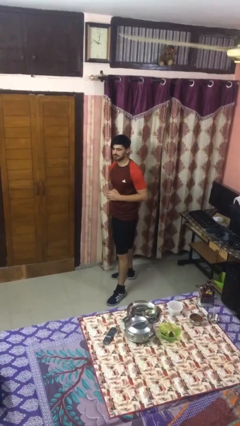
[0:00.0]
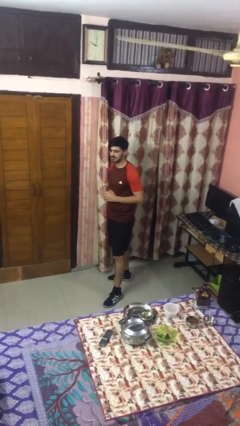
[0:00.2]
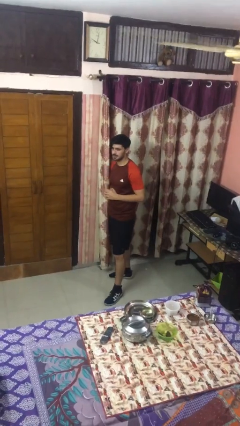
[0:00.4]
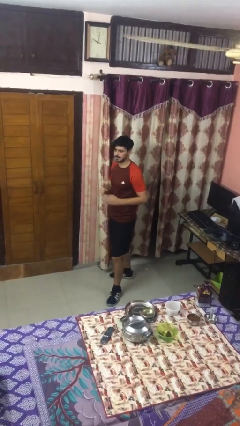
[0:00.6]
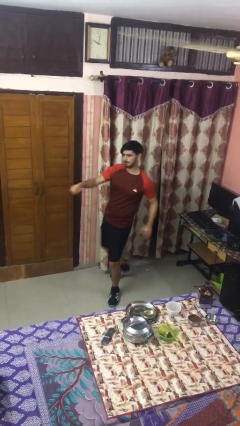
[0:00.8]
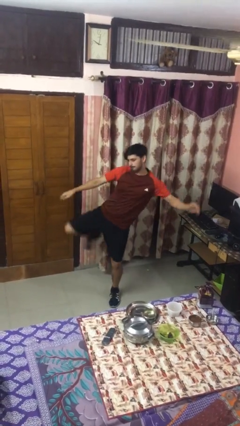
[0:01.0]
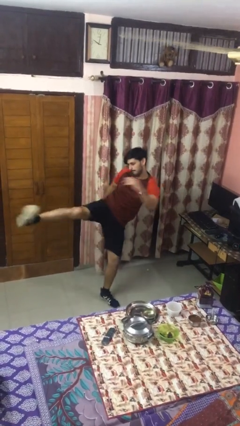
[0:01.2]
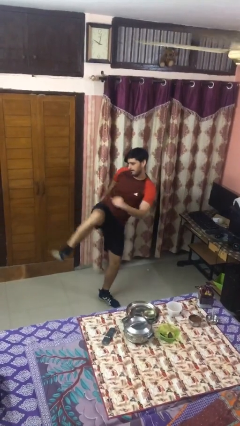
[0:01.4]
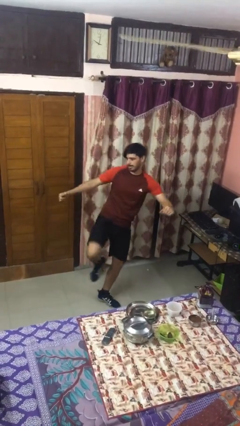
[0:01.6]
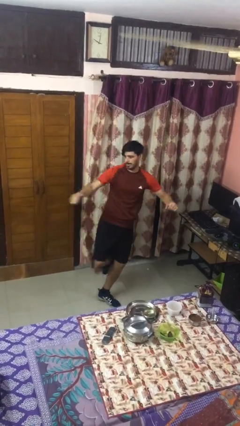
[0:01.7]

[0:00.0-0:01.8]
person karate kicks

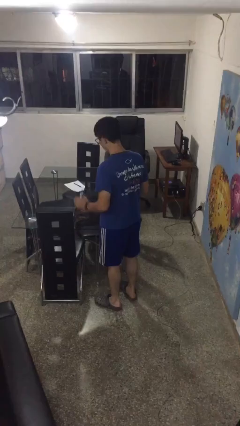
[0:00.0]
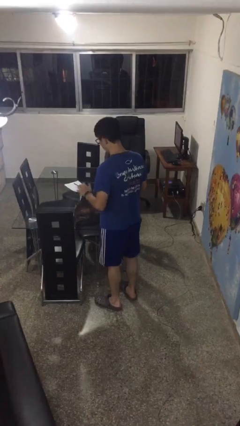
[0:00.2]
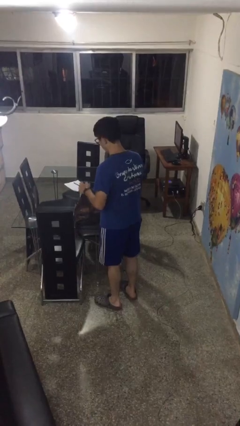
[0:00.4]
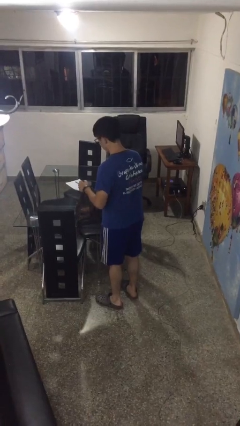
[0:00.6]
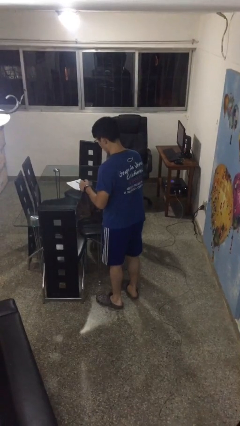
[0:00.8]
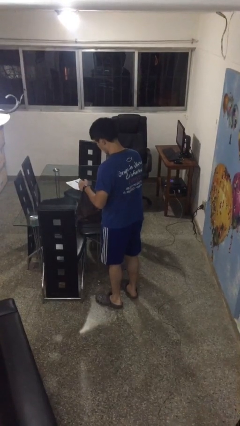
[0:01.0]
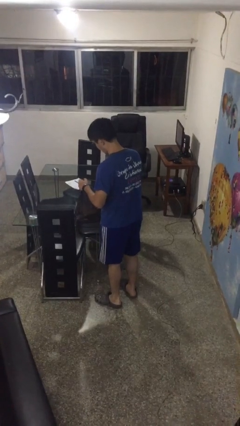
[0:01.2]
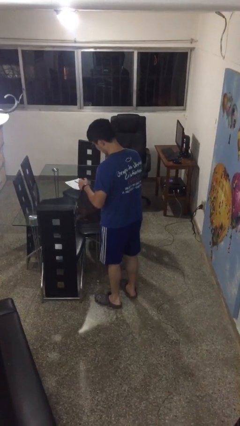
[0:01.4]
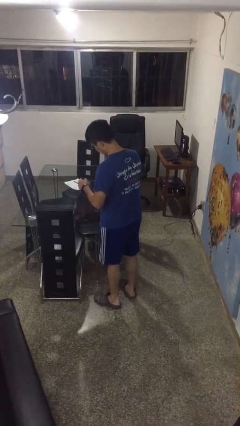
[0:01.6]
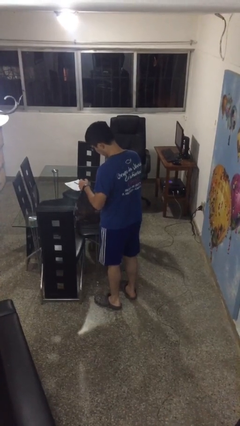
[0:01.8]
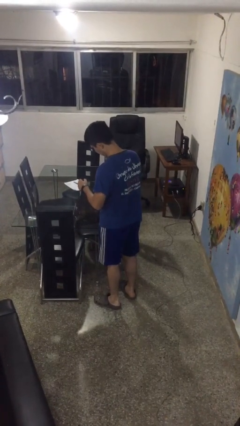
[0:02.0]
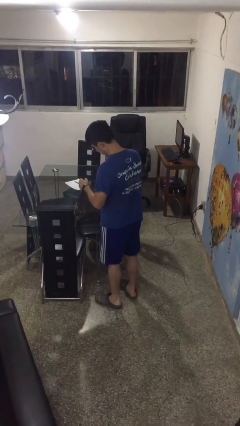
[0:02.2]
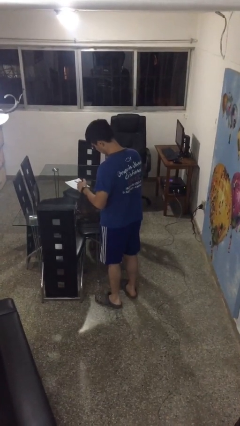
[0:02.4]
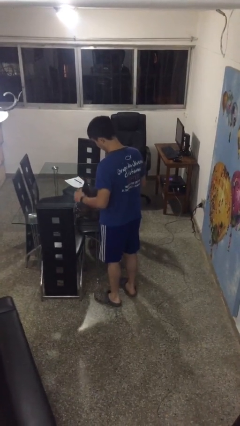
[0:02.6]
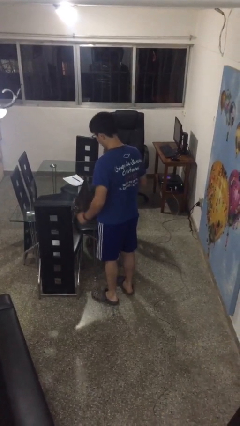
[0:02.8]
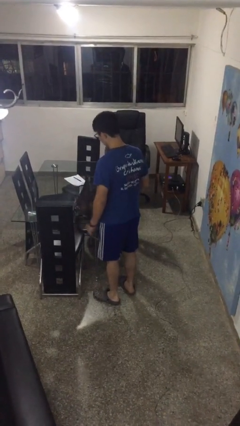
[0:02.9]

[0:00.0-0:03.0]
person searches in bag

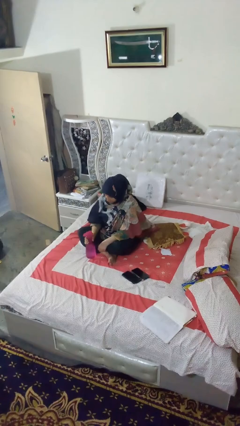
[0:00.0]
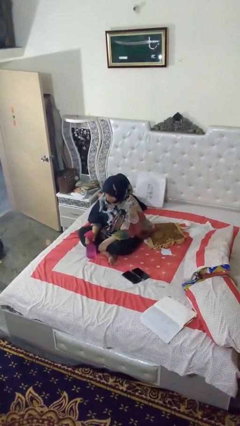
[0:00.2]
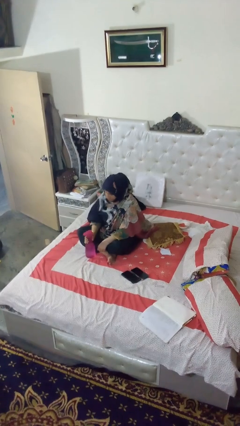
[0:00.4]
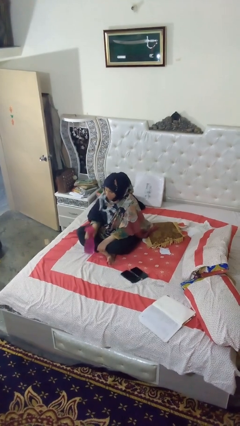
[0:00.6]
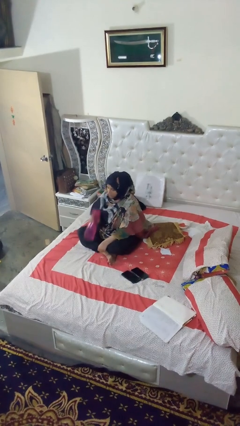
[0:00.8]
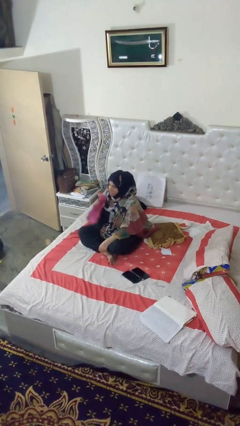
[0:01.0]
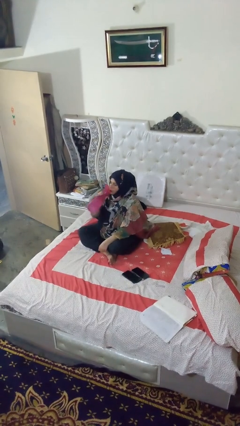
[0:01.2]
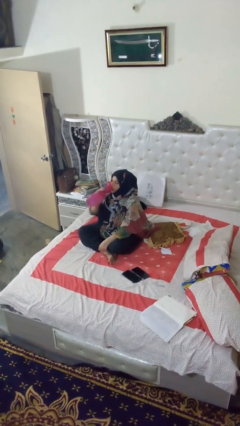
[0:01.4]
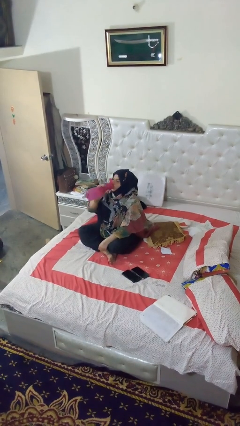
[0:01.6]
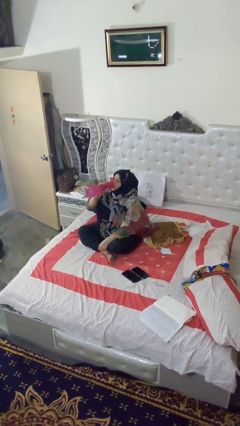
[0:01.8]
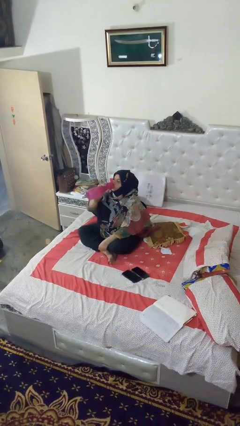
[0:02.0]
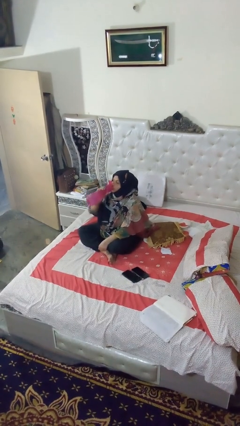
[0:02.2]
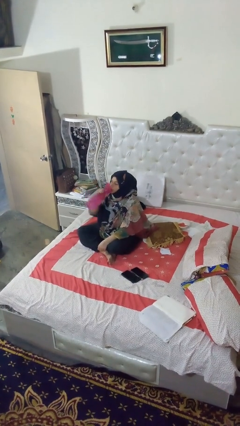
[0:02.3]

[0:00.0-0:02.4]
person drinks from bottle

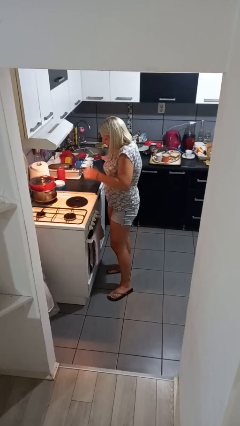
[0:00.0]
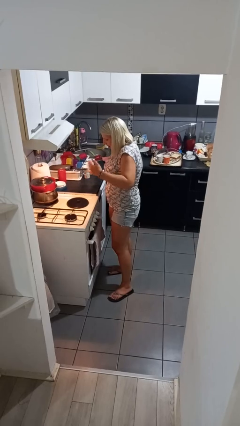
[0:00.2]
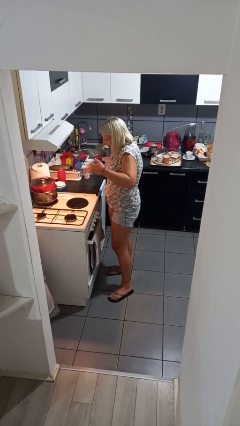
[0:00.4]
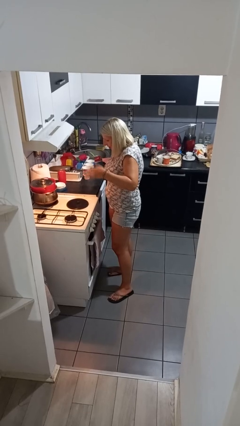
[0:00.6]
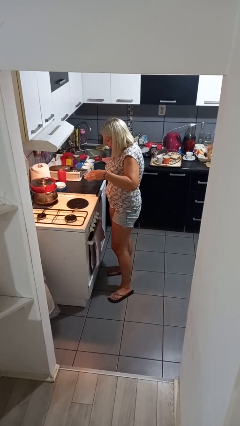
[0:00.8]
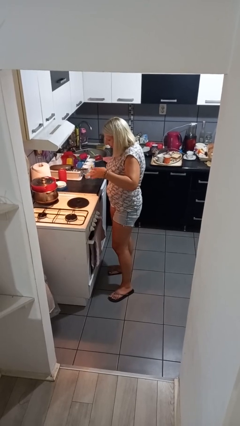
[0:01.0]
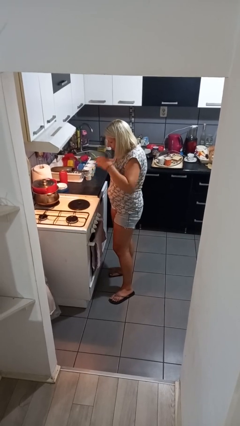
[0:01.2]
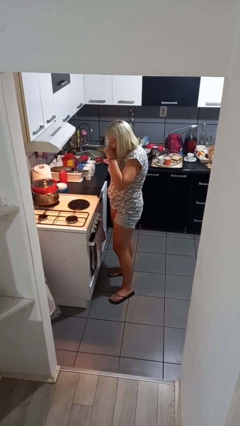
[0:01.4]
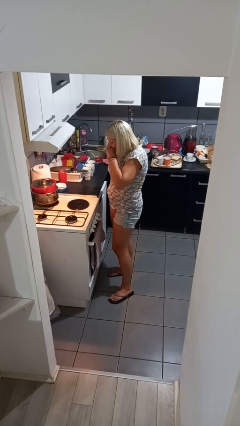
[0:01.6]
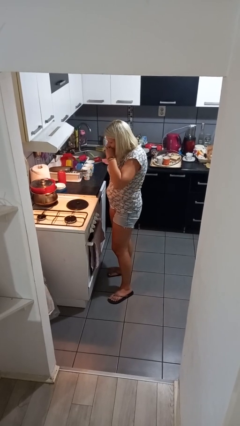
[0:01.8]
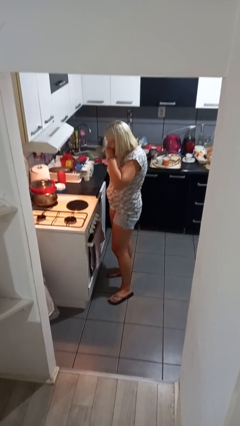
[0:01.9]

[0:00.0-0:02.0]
person burns hand

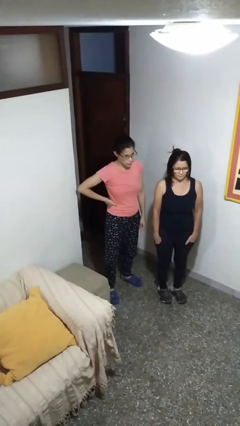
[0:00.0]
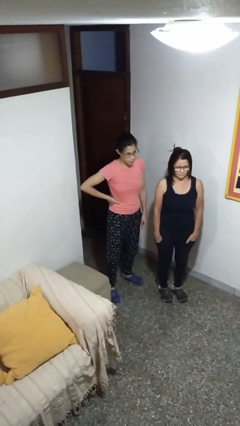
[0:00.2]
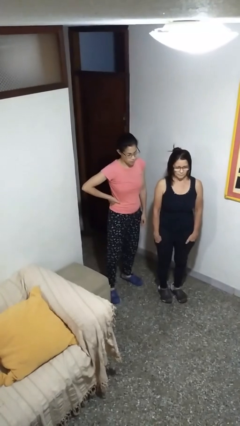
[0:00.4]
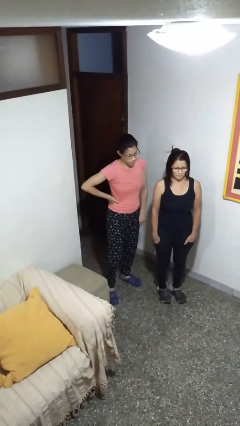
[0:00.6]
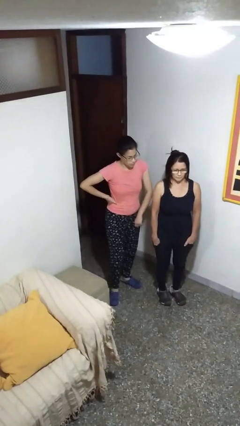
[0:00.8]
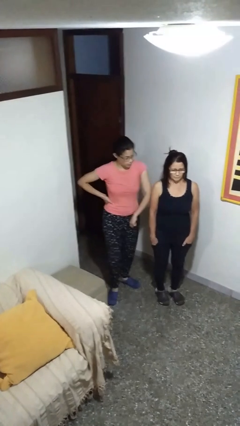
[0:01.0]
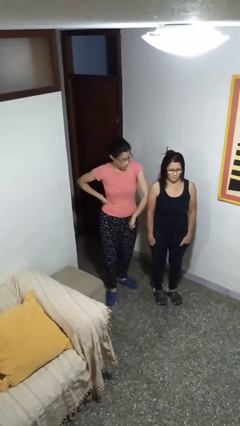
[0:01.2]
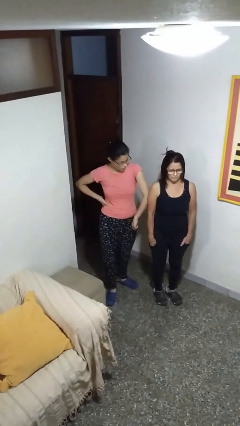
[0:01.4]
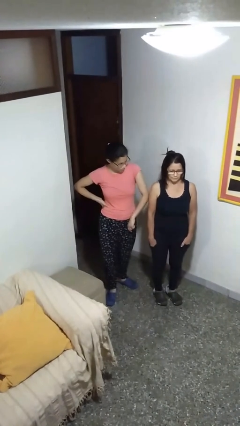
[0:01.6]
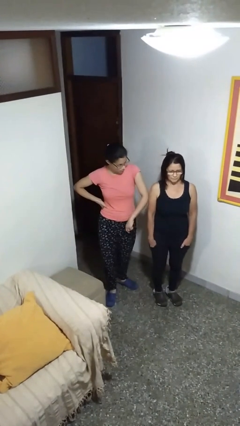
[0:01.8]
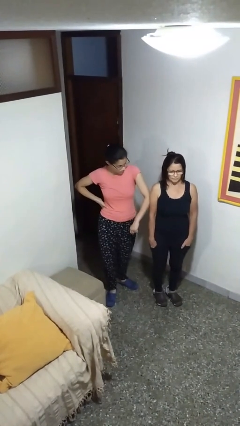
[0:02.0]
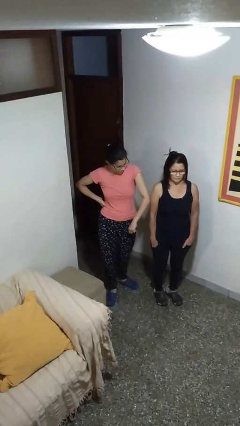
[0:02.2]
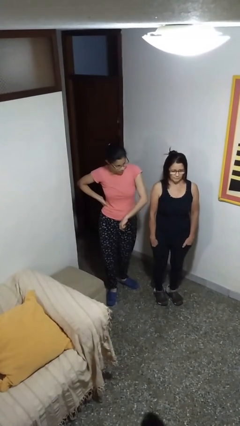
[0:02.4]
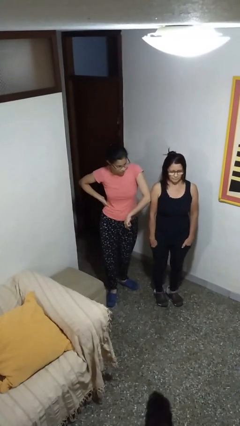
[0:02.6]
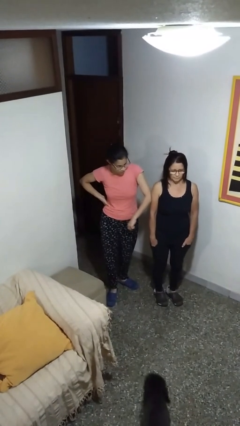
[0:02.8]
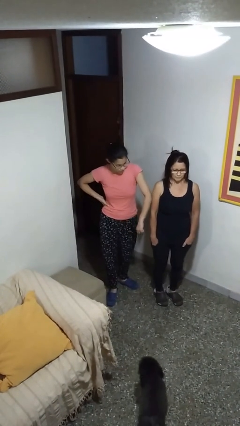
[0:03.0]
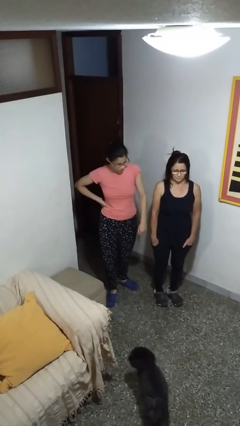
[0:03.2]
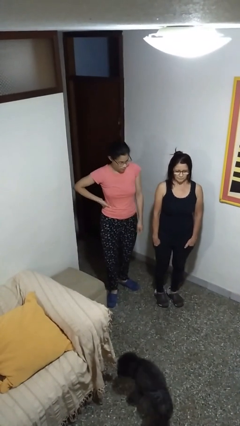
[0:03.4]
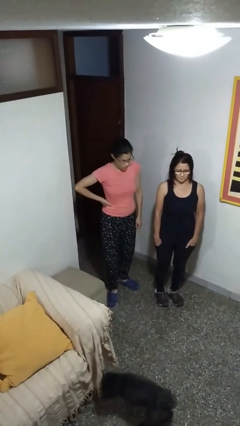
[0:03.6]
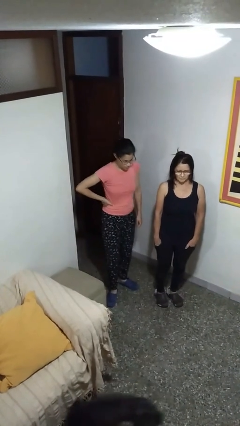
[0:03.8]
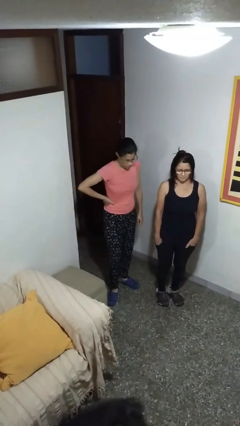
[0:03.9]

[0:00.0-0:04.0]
person nudges person with elbow

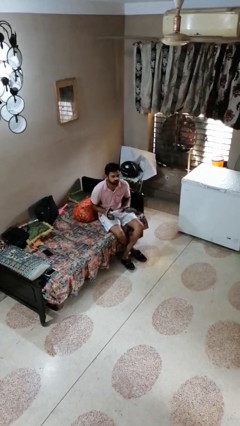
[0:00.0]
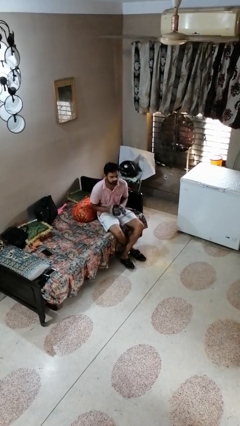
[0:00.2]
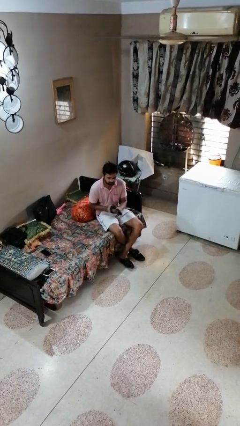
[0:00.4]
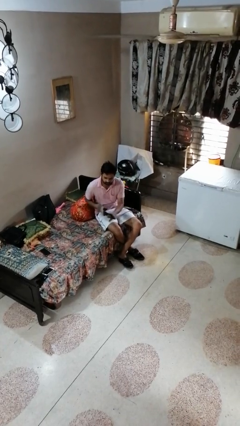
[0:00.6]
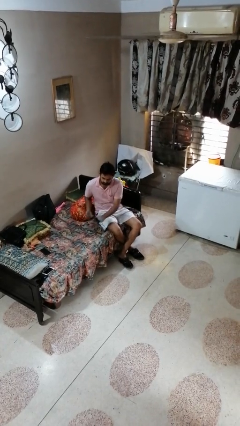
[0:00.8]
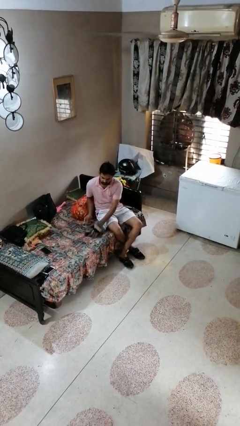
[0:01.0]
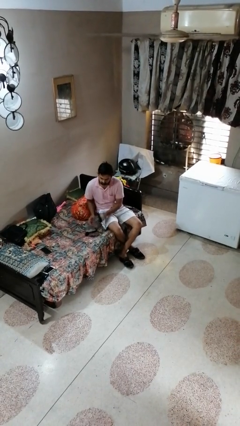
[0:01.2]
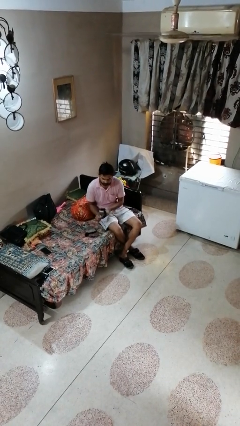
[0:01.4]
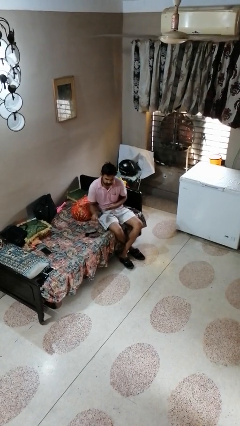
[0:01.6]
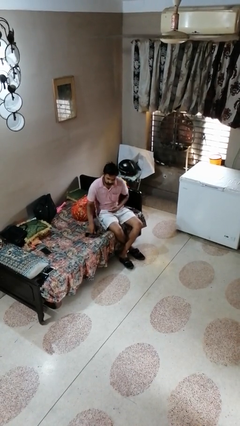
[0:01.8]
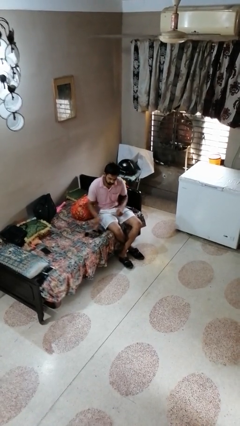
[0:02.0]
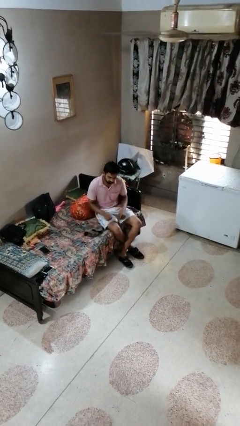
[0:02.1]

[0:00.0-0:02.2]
person takes off gloves

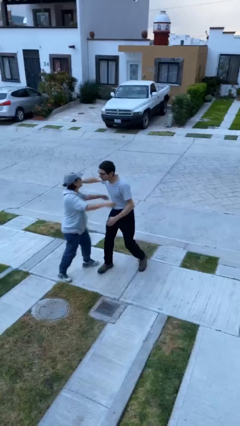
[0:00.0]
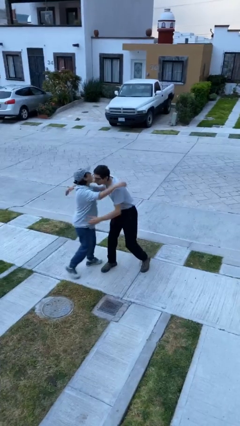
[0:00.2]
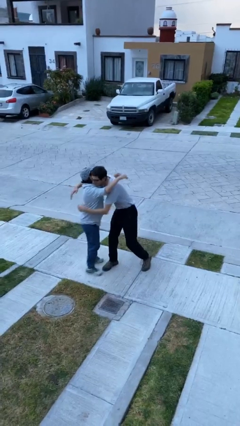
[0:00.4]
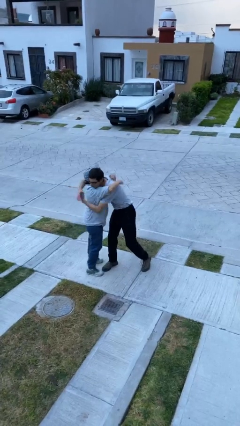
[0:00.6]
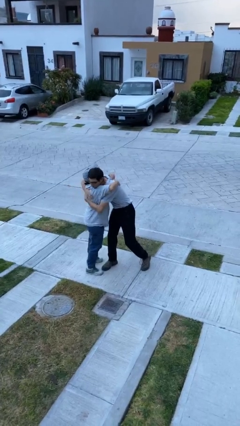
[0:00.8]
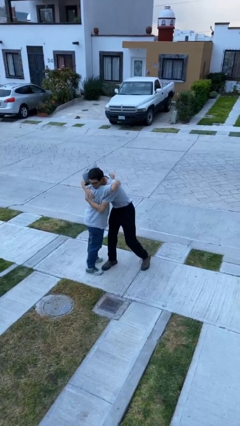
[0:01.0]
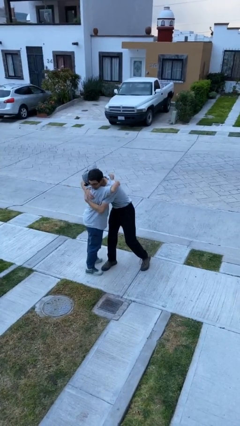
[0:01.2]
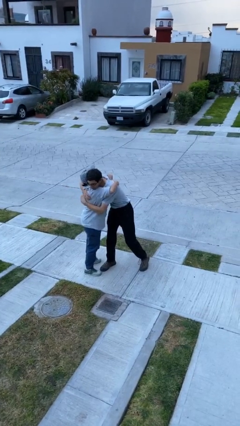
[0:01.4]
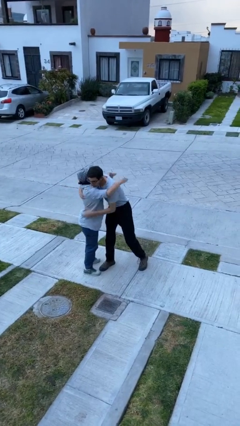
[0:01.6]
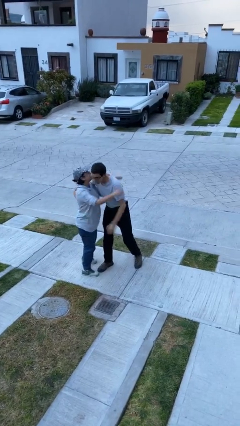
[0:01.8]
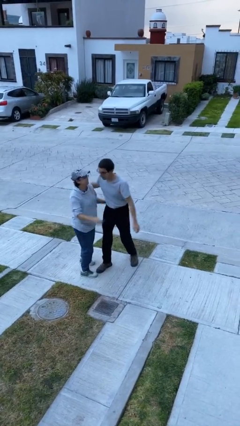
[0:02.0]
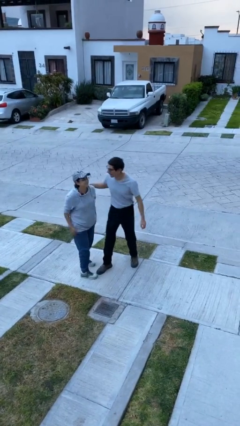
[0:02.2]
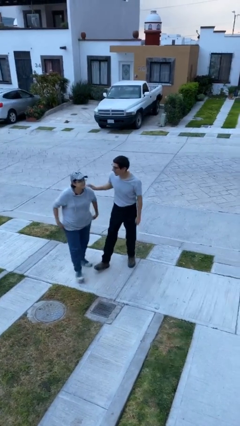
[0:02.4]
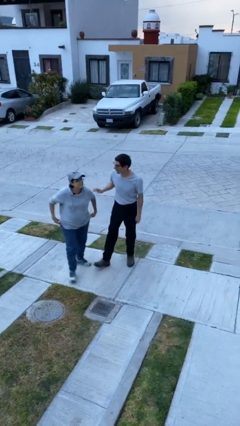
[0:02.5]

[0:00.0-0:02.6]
person embraces person
